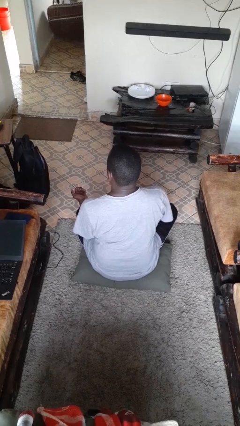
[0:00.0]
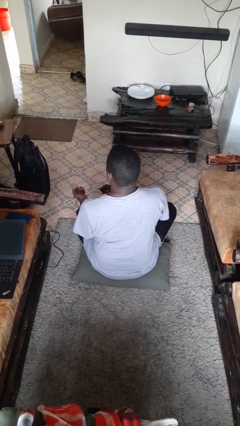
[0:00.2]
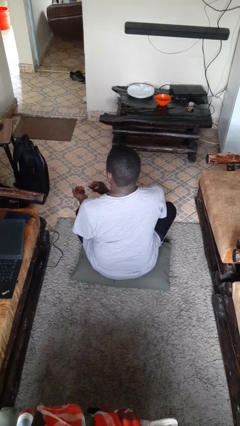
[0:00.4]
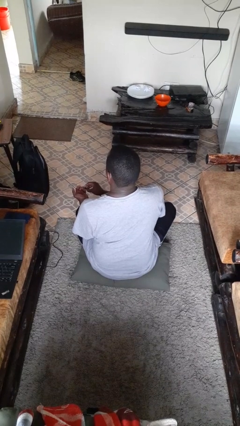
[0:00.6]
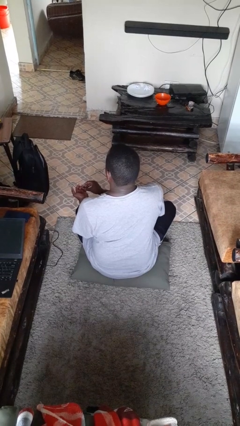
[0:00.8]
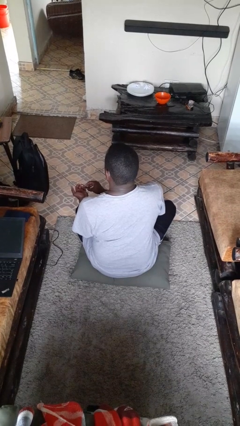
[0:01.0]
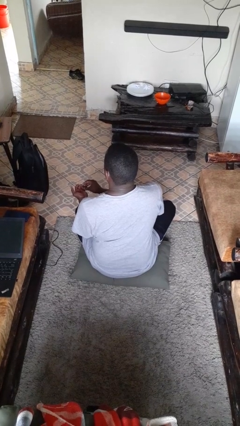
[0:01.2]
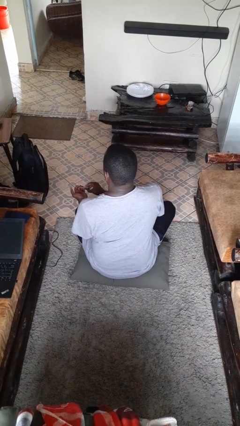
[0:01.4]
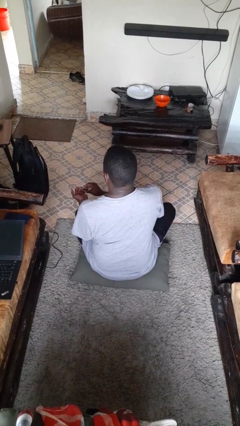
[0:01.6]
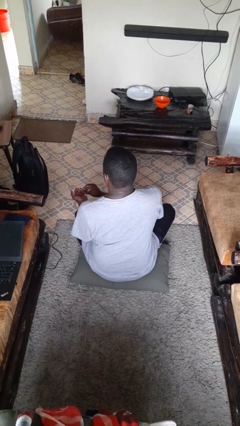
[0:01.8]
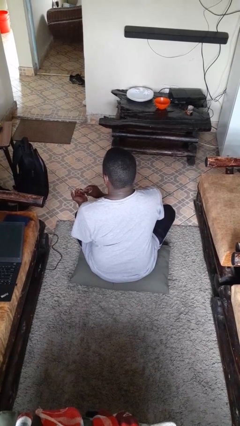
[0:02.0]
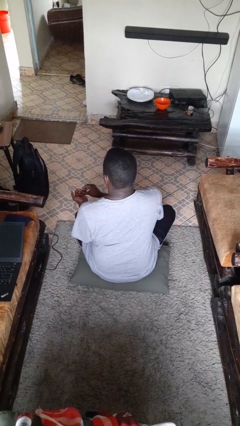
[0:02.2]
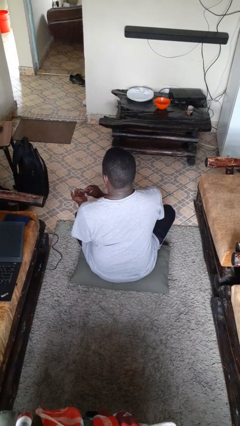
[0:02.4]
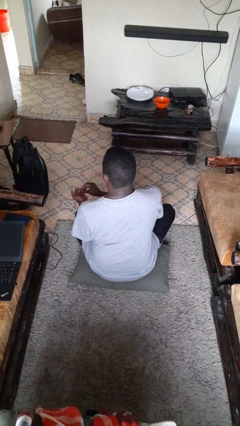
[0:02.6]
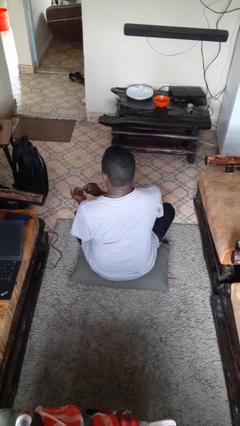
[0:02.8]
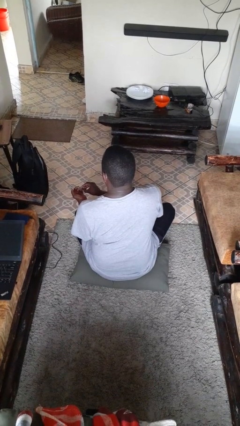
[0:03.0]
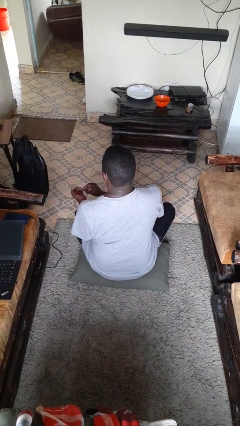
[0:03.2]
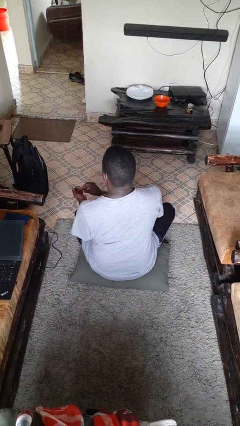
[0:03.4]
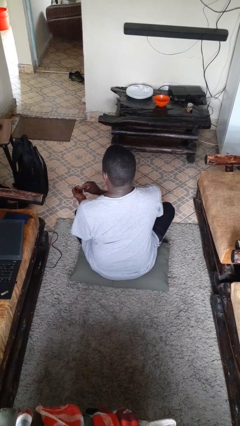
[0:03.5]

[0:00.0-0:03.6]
person files fingernails

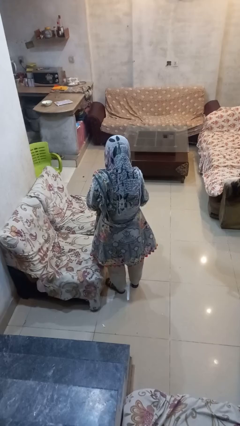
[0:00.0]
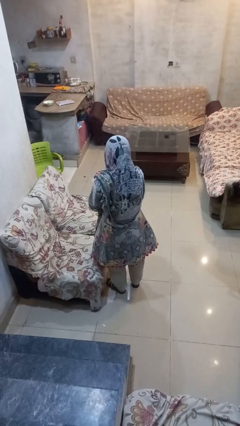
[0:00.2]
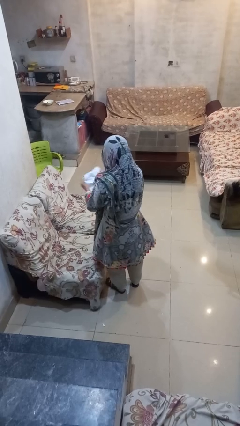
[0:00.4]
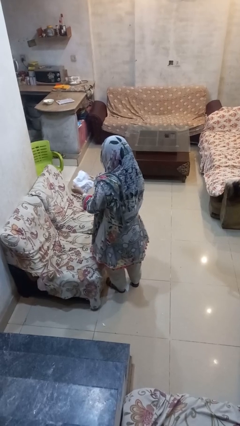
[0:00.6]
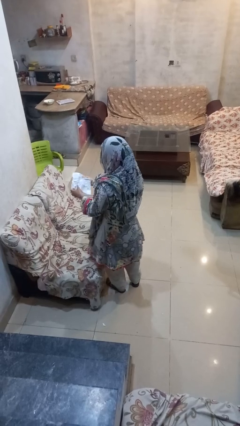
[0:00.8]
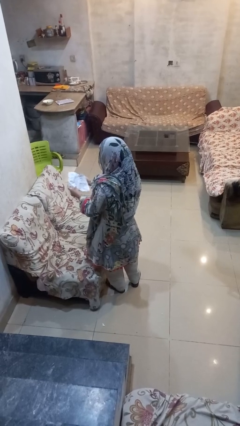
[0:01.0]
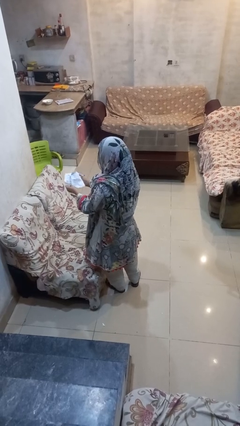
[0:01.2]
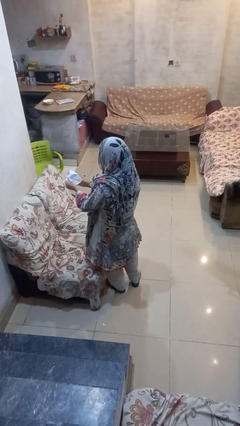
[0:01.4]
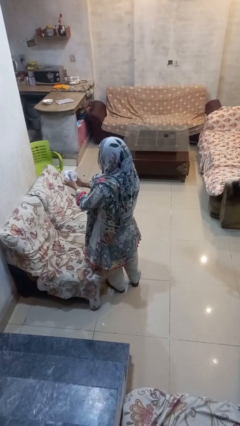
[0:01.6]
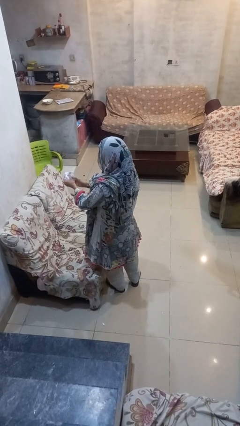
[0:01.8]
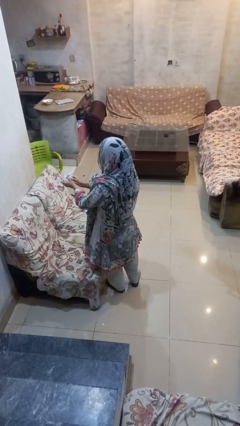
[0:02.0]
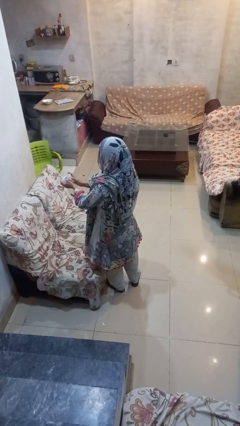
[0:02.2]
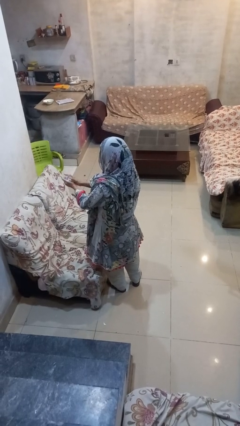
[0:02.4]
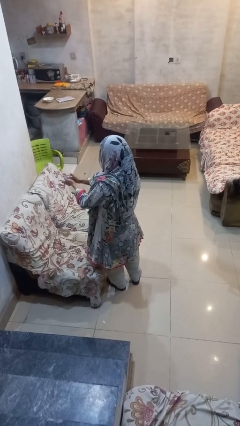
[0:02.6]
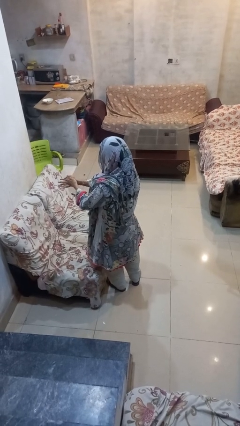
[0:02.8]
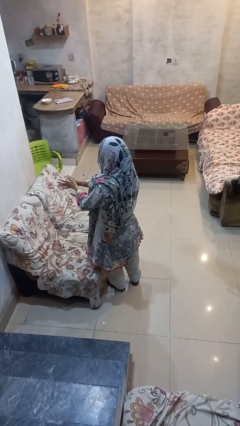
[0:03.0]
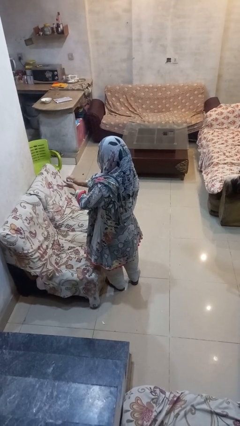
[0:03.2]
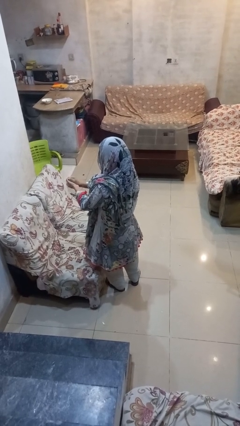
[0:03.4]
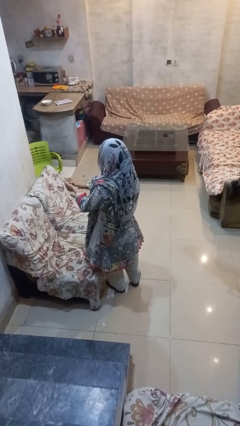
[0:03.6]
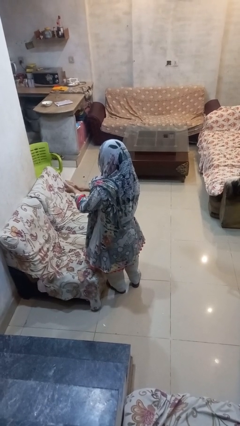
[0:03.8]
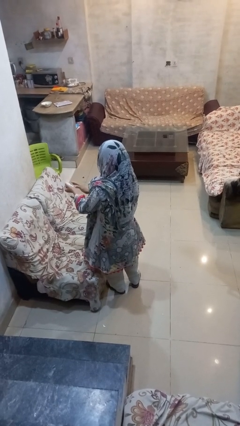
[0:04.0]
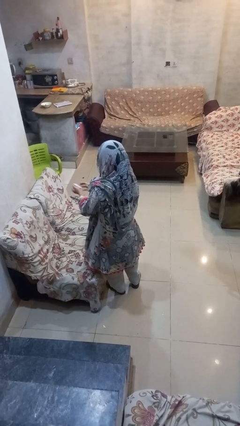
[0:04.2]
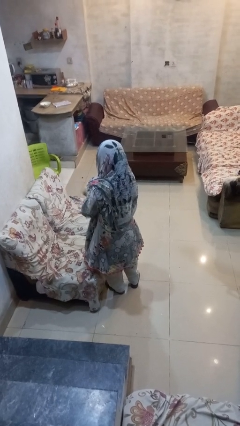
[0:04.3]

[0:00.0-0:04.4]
person crumples paper

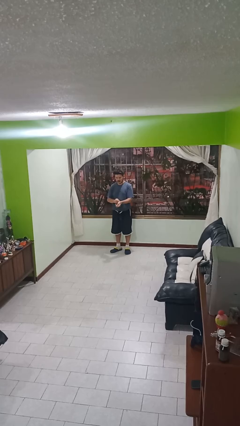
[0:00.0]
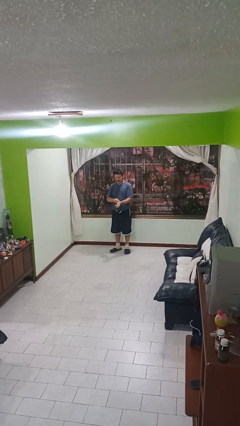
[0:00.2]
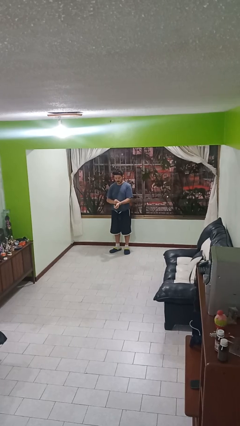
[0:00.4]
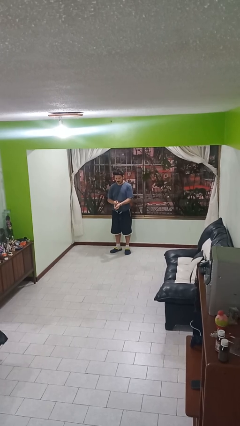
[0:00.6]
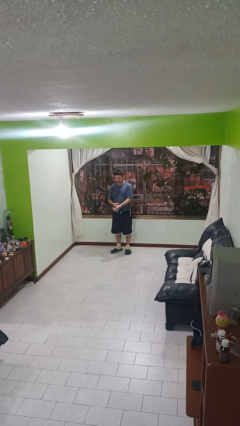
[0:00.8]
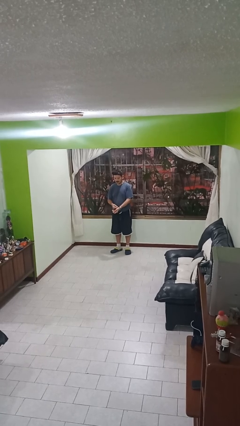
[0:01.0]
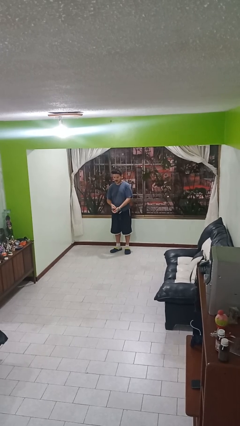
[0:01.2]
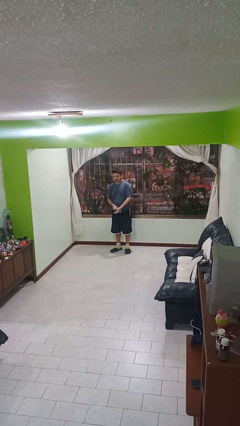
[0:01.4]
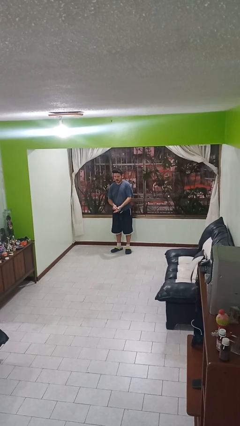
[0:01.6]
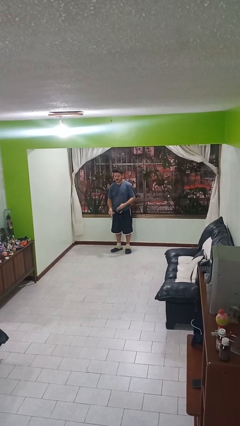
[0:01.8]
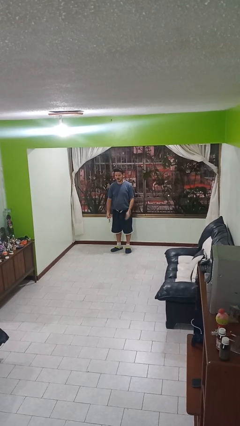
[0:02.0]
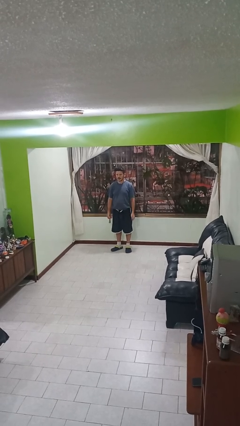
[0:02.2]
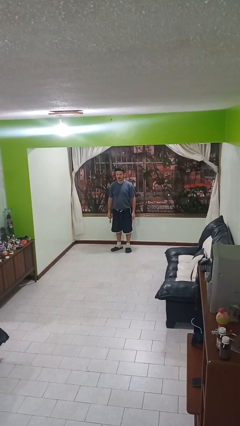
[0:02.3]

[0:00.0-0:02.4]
person takes off wristwatch

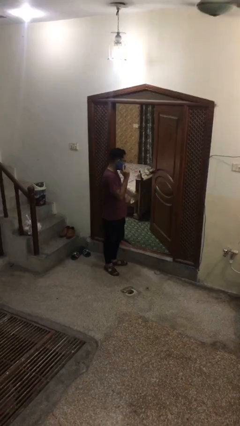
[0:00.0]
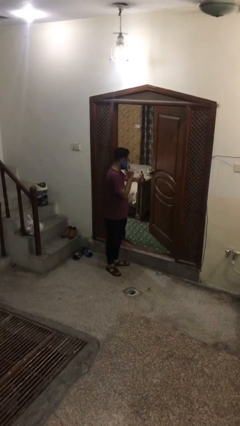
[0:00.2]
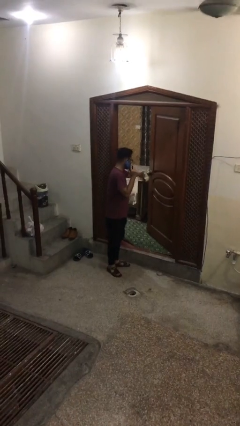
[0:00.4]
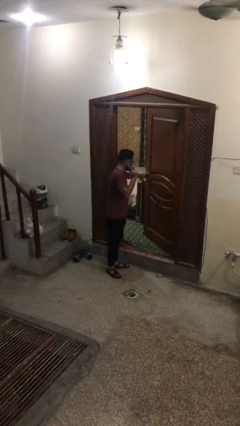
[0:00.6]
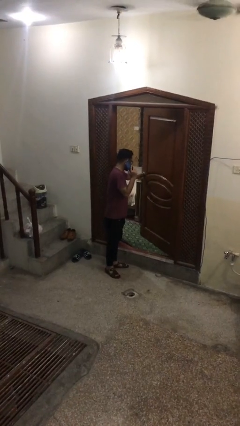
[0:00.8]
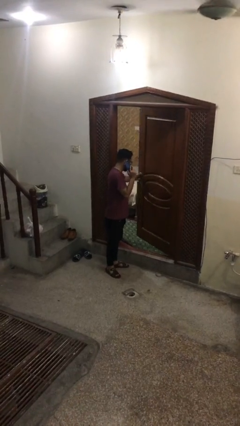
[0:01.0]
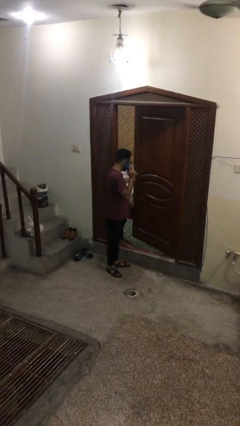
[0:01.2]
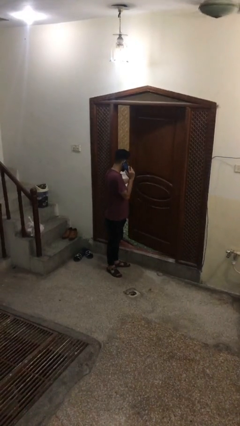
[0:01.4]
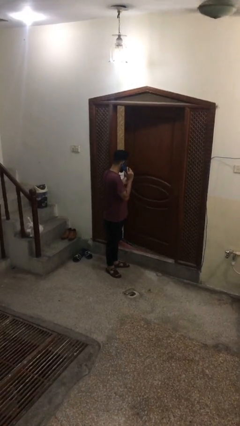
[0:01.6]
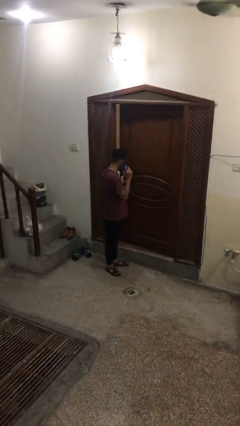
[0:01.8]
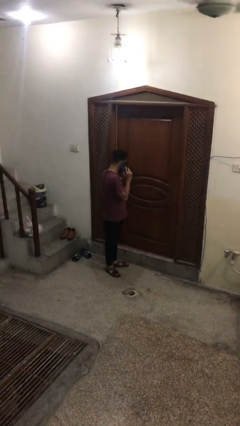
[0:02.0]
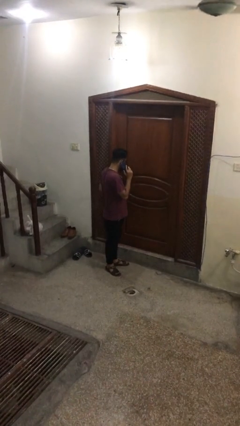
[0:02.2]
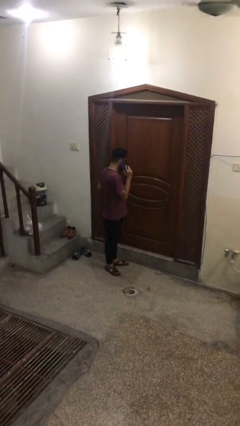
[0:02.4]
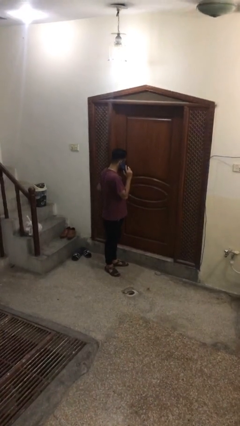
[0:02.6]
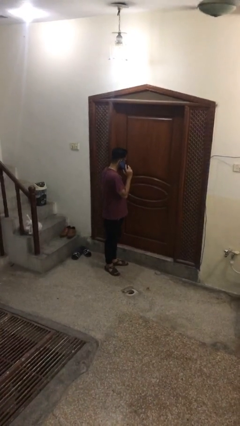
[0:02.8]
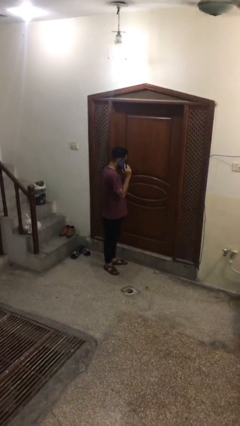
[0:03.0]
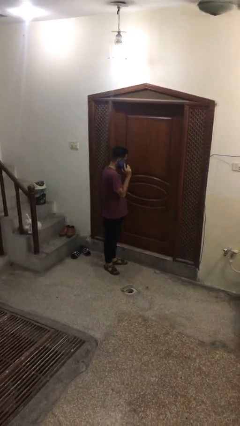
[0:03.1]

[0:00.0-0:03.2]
person closes facility door

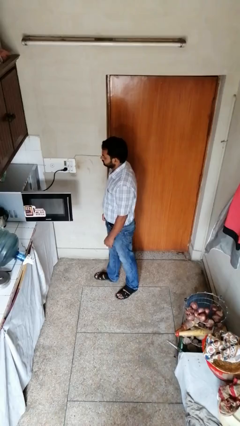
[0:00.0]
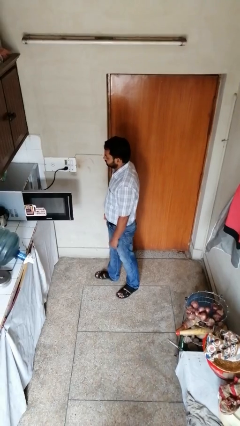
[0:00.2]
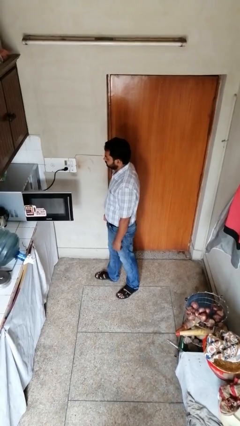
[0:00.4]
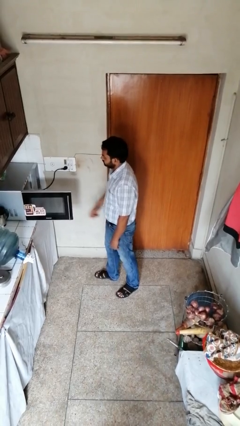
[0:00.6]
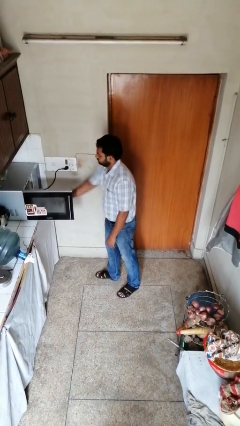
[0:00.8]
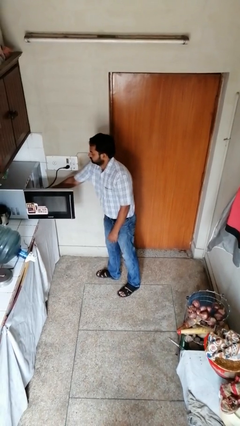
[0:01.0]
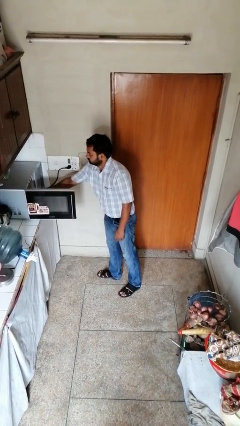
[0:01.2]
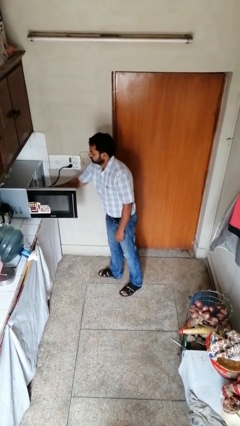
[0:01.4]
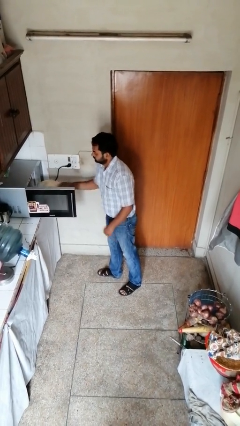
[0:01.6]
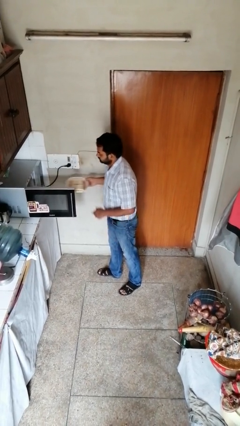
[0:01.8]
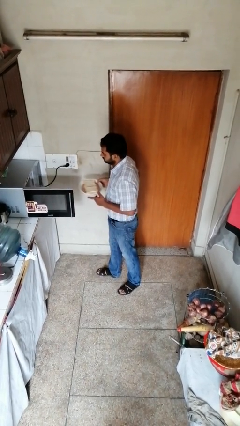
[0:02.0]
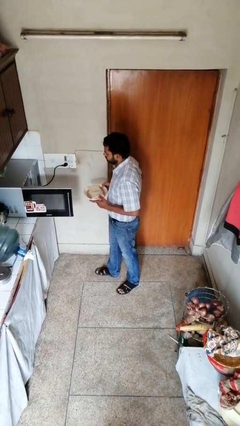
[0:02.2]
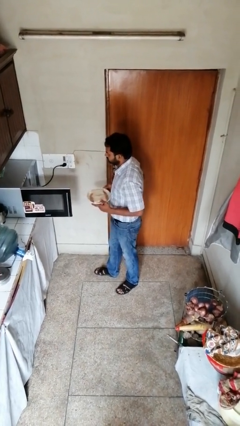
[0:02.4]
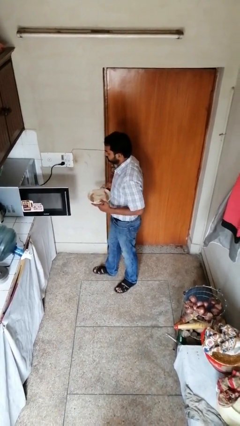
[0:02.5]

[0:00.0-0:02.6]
person takes object from oven

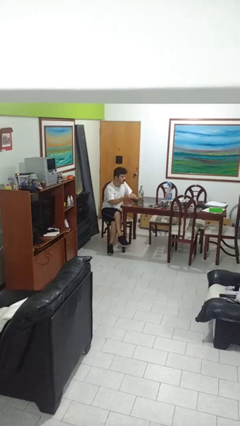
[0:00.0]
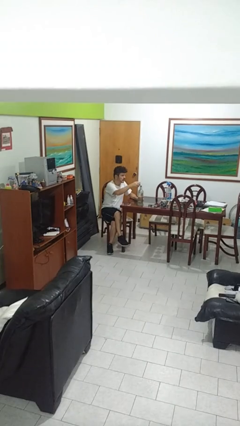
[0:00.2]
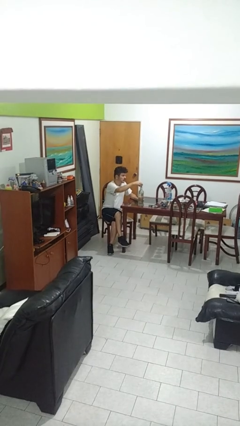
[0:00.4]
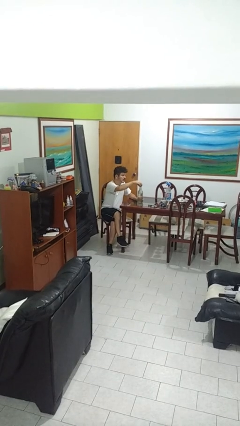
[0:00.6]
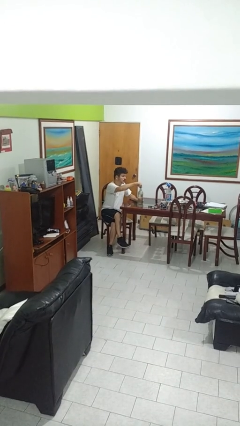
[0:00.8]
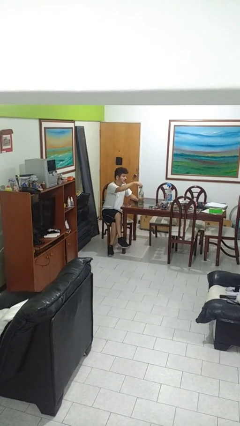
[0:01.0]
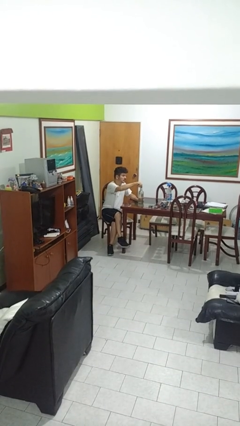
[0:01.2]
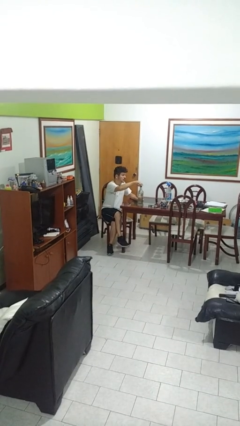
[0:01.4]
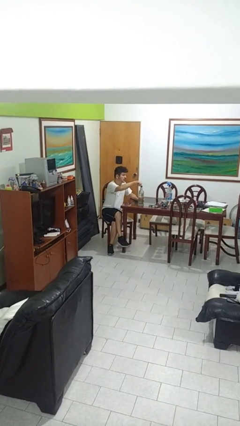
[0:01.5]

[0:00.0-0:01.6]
person screws lid to bottle
